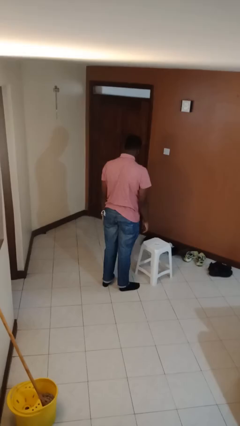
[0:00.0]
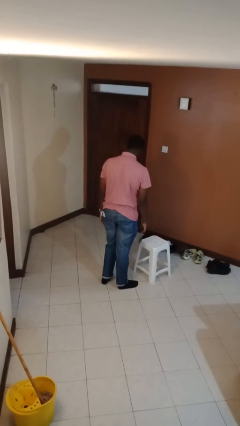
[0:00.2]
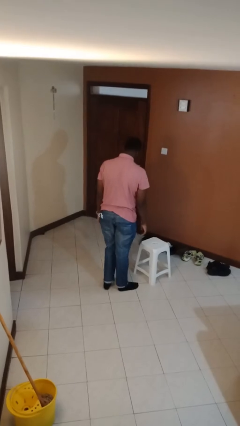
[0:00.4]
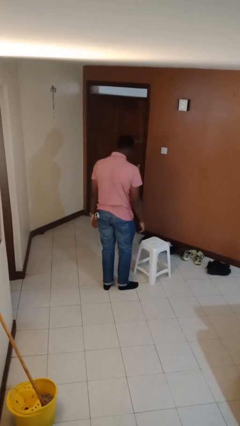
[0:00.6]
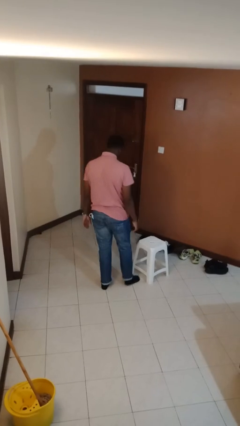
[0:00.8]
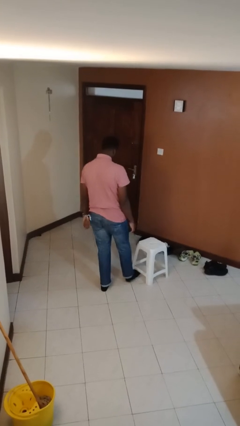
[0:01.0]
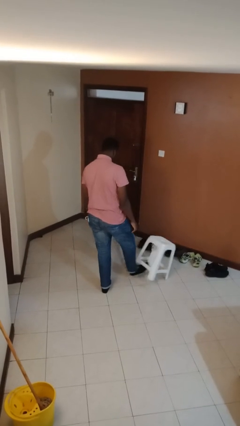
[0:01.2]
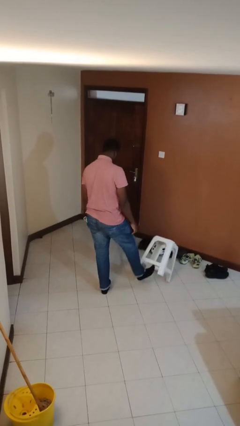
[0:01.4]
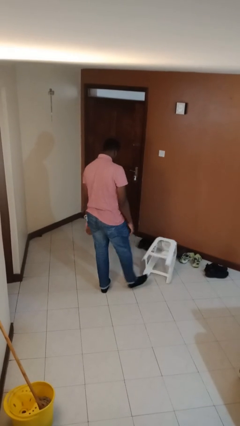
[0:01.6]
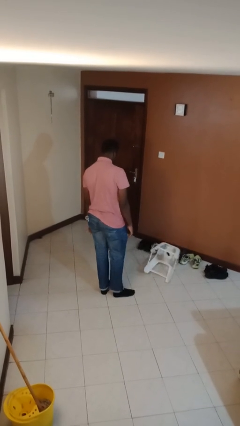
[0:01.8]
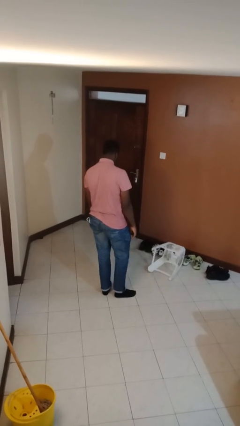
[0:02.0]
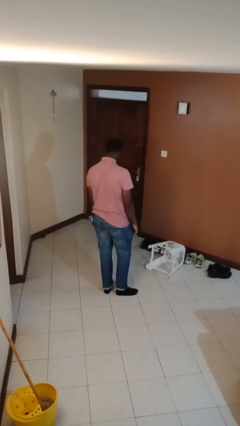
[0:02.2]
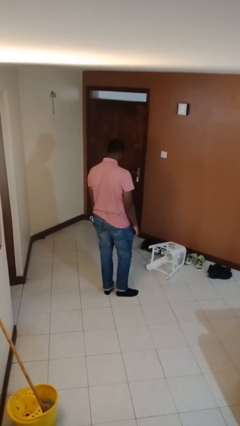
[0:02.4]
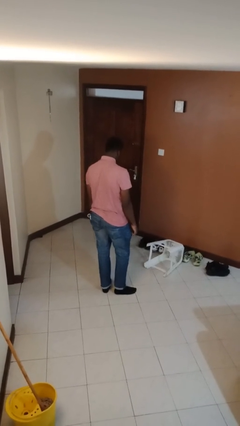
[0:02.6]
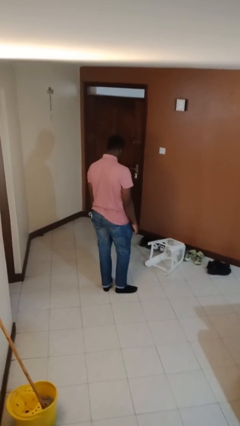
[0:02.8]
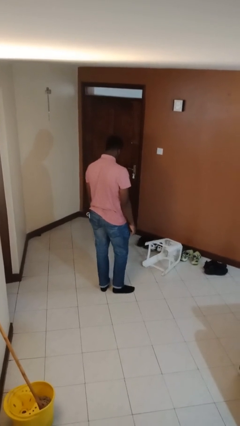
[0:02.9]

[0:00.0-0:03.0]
person knocks over furniture

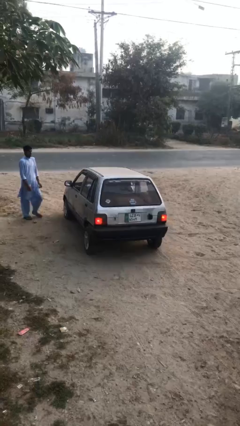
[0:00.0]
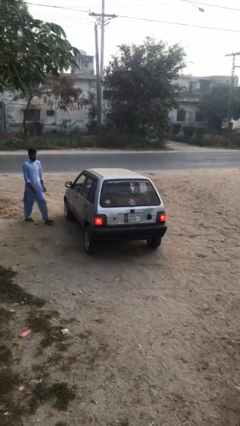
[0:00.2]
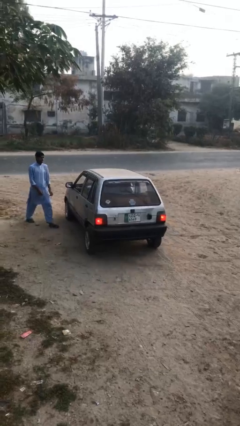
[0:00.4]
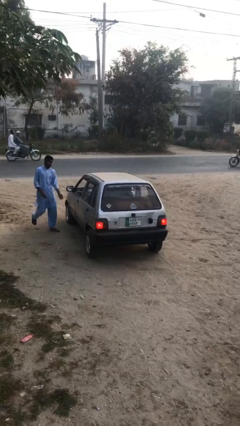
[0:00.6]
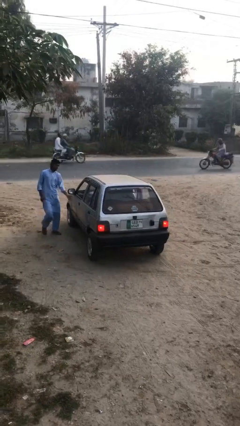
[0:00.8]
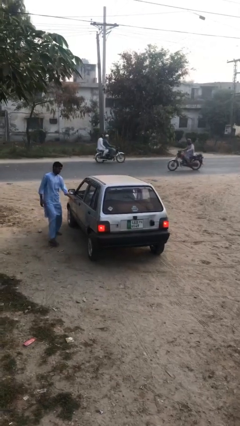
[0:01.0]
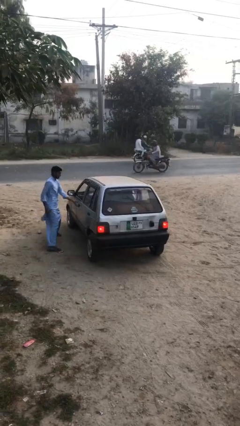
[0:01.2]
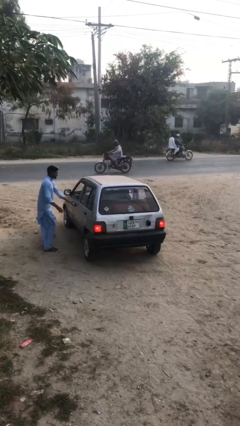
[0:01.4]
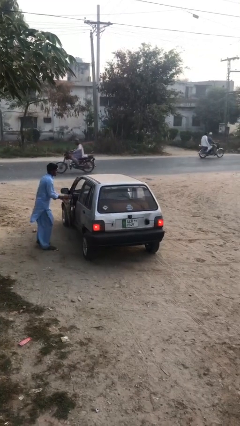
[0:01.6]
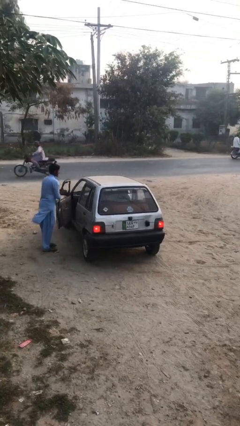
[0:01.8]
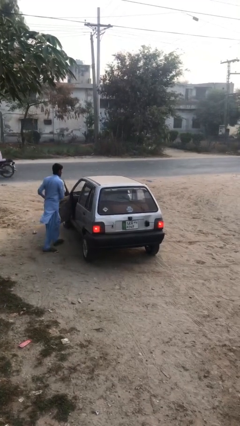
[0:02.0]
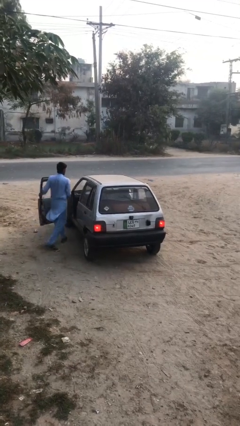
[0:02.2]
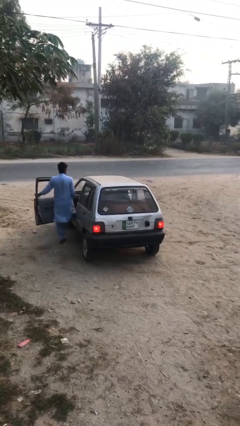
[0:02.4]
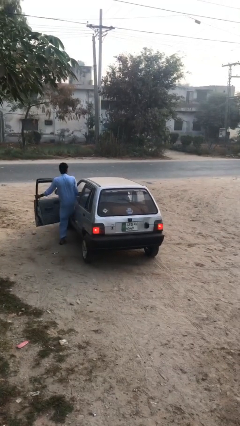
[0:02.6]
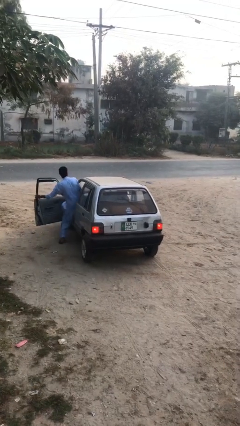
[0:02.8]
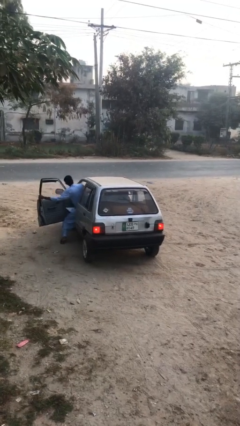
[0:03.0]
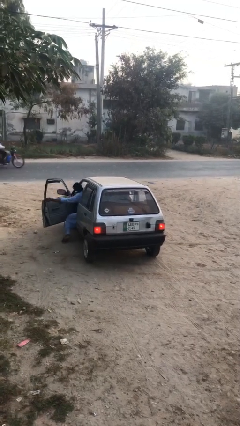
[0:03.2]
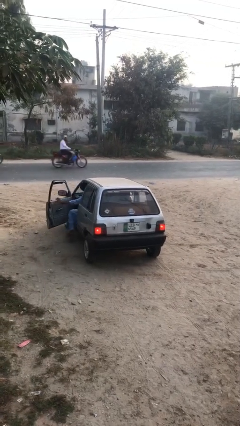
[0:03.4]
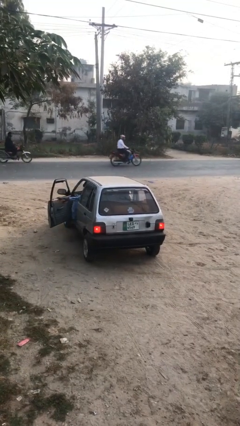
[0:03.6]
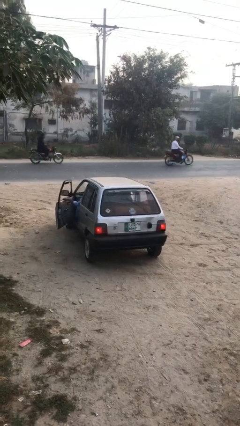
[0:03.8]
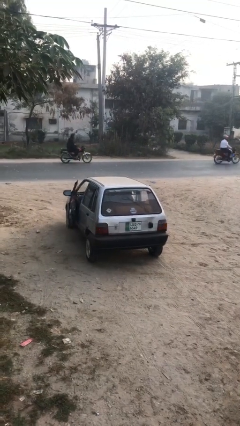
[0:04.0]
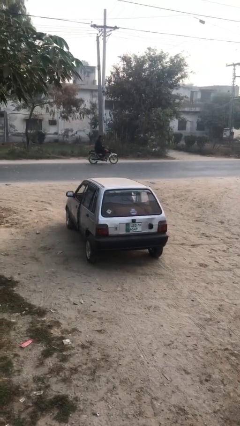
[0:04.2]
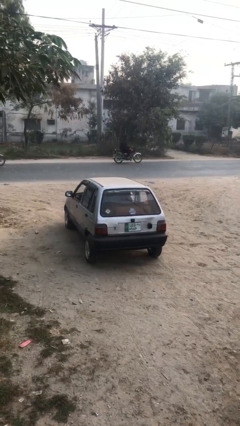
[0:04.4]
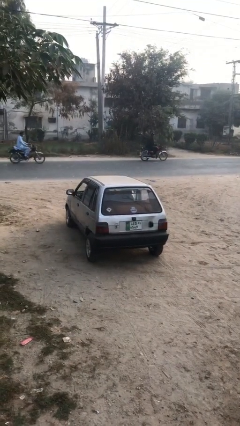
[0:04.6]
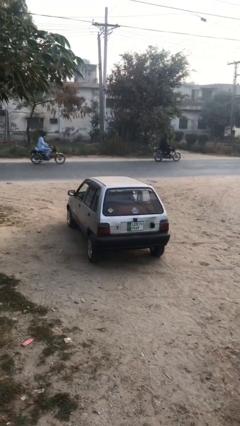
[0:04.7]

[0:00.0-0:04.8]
car picks up person

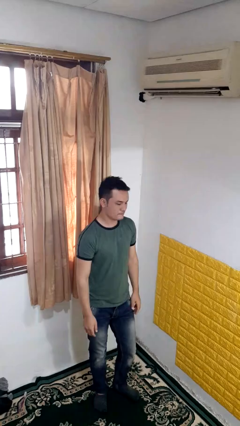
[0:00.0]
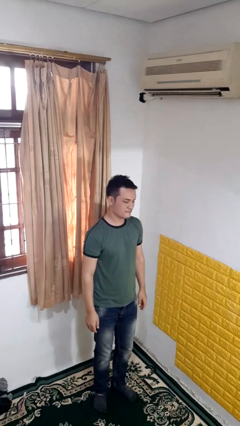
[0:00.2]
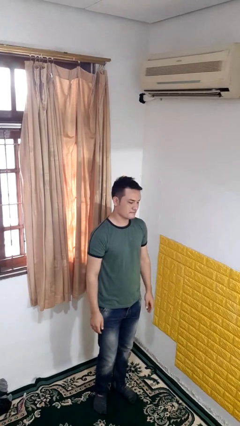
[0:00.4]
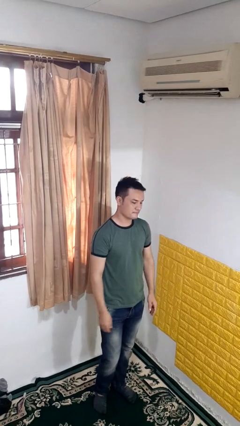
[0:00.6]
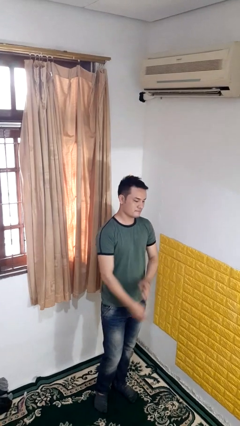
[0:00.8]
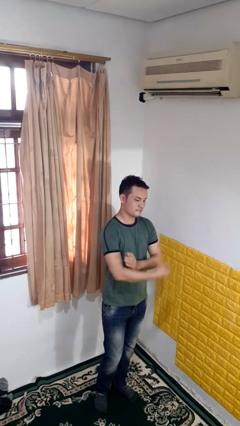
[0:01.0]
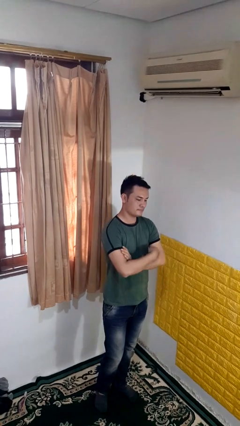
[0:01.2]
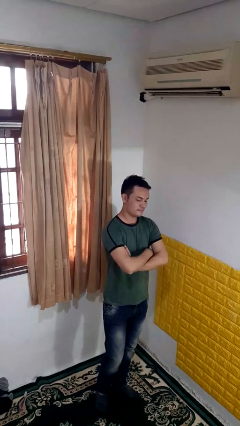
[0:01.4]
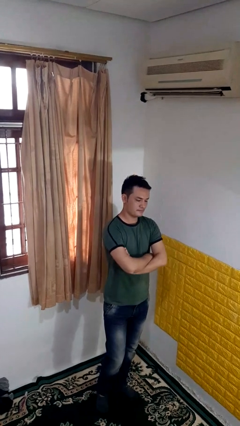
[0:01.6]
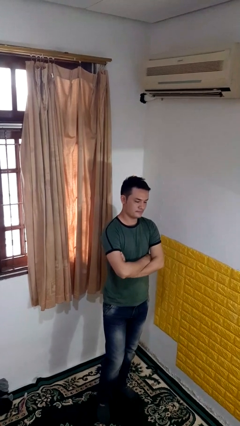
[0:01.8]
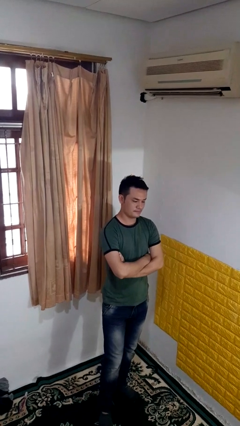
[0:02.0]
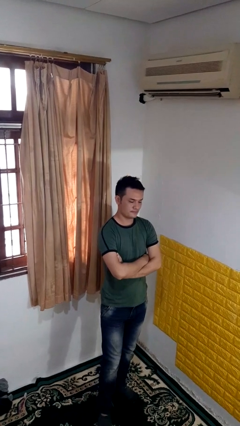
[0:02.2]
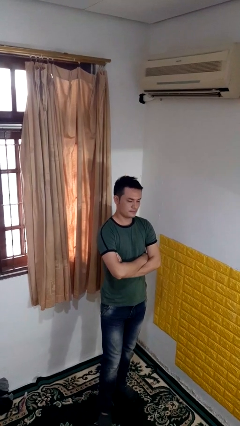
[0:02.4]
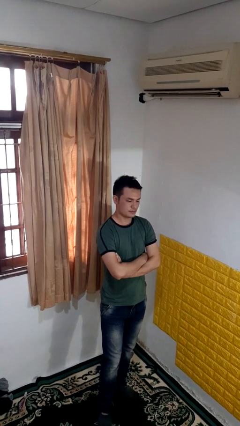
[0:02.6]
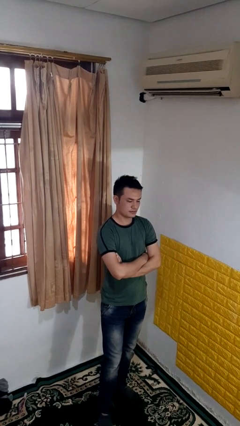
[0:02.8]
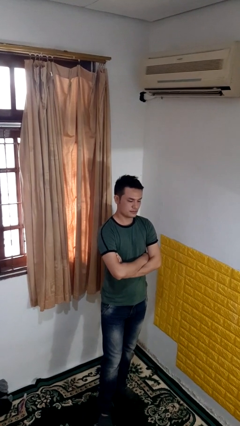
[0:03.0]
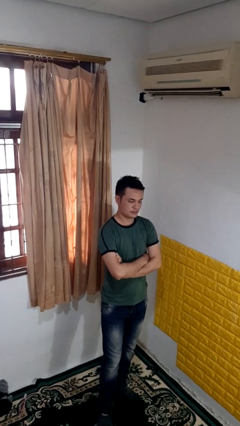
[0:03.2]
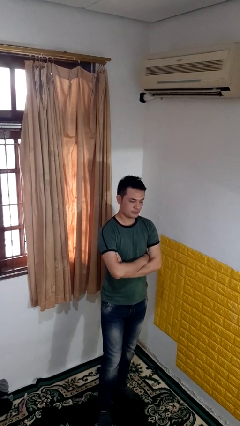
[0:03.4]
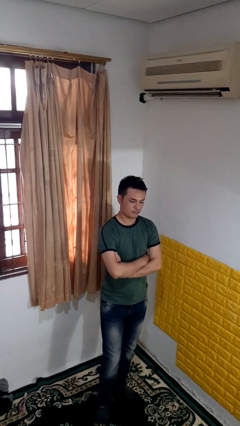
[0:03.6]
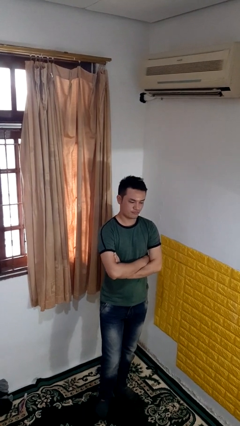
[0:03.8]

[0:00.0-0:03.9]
person crosses arms

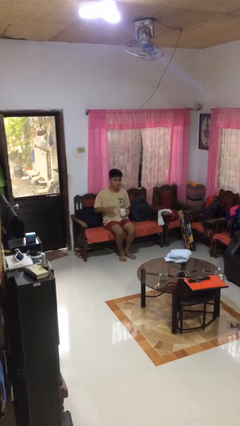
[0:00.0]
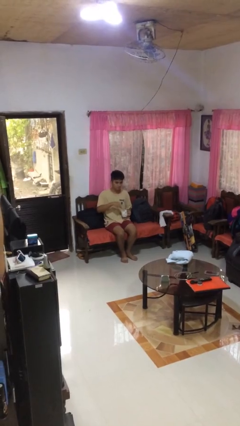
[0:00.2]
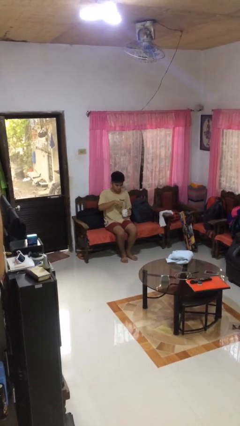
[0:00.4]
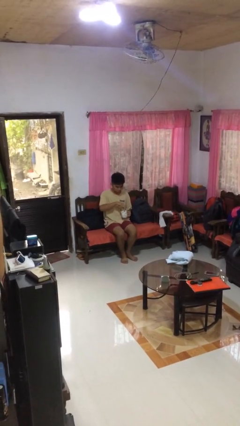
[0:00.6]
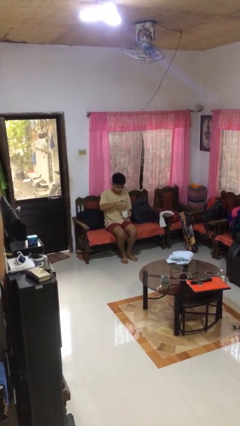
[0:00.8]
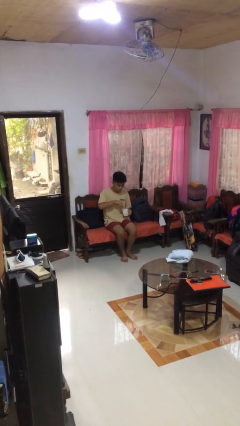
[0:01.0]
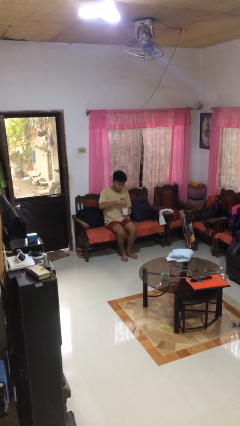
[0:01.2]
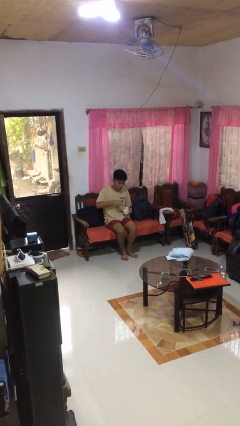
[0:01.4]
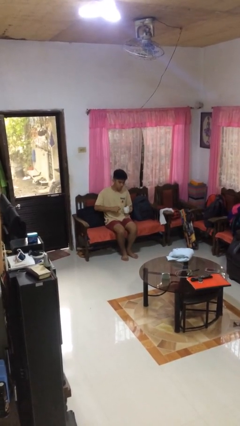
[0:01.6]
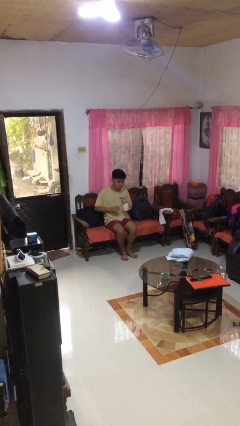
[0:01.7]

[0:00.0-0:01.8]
person stirs mug

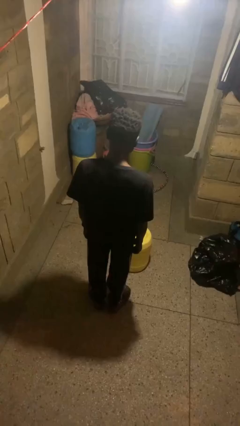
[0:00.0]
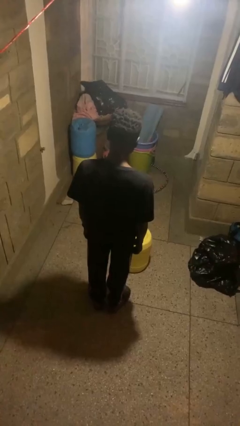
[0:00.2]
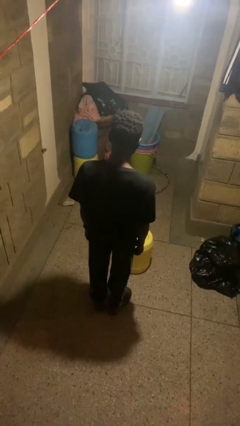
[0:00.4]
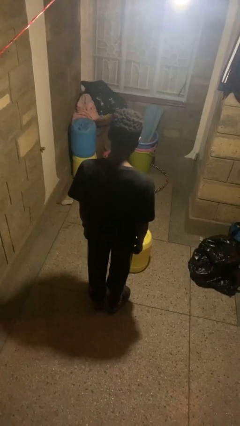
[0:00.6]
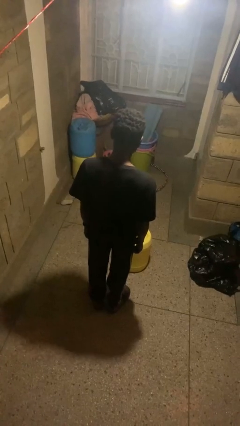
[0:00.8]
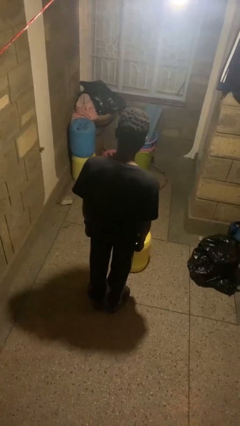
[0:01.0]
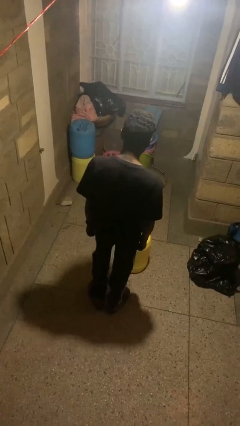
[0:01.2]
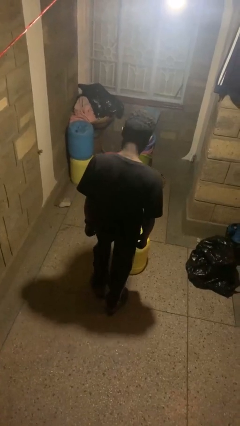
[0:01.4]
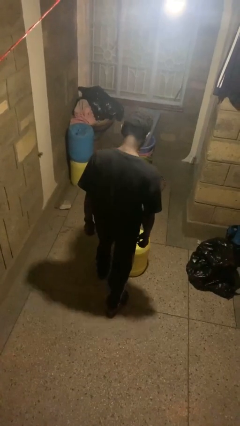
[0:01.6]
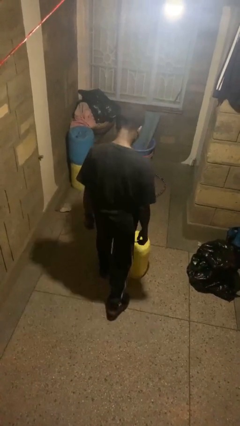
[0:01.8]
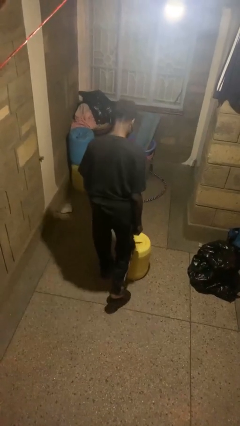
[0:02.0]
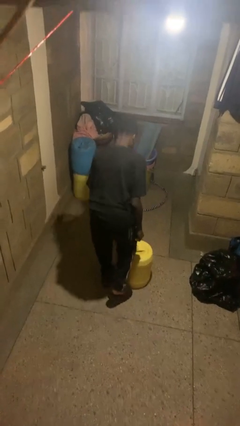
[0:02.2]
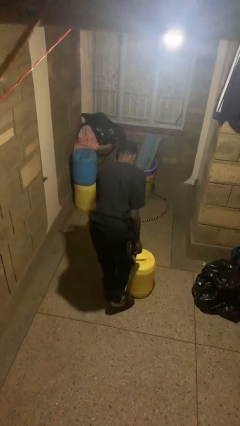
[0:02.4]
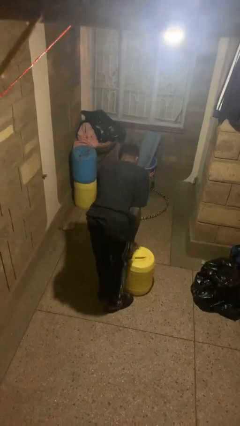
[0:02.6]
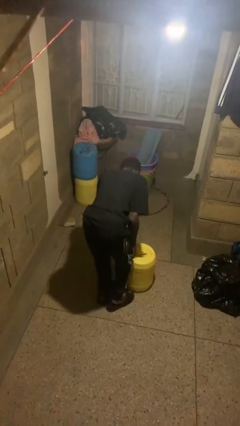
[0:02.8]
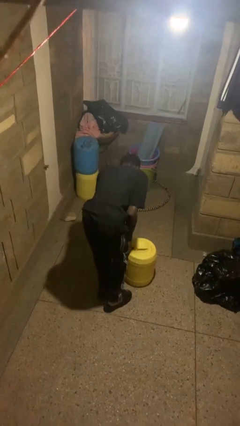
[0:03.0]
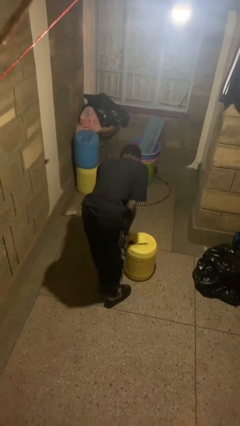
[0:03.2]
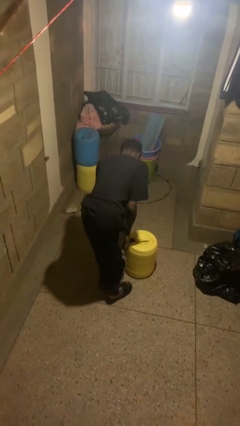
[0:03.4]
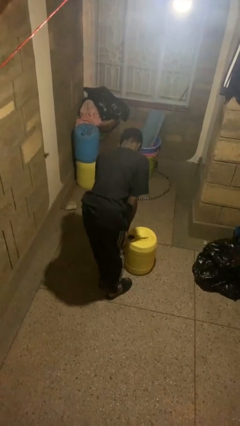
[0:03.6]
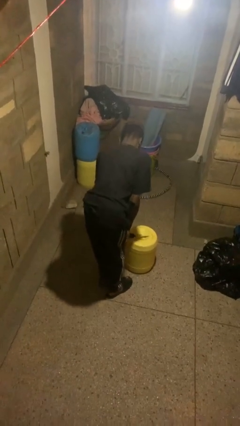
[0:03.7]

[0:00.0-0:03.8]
person stubs toe

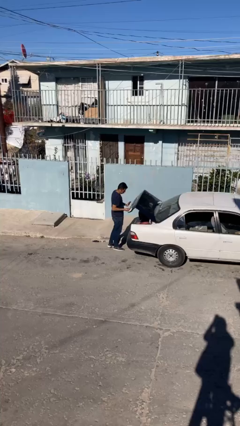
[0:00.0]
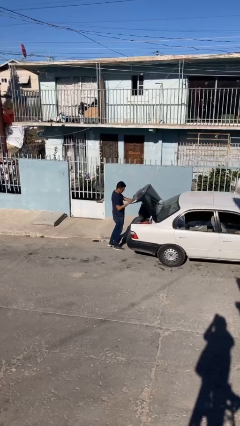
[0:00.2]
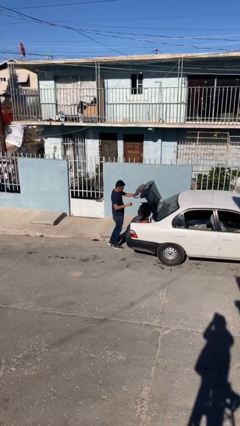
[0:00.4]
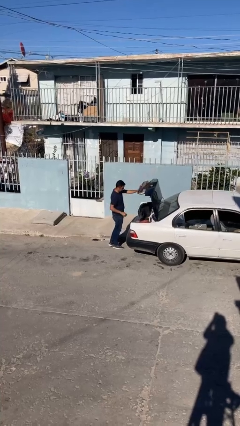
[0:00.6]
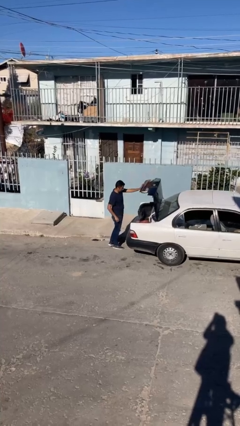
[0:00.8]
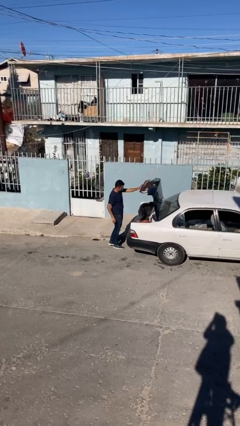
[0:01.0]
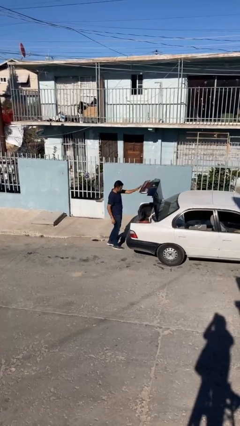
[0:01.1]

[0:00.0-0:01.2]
person opens car trunk
